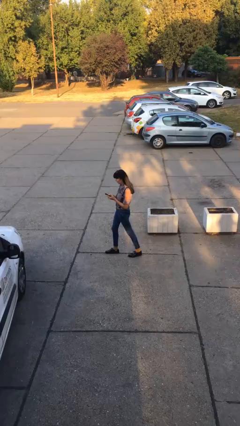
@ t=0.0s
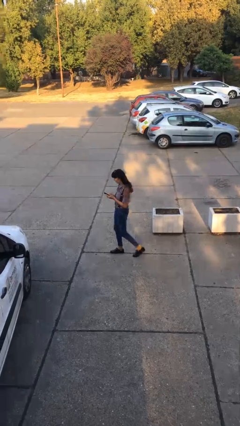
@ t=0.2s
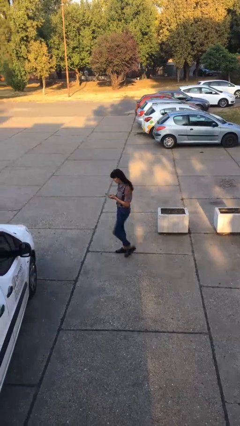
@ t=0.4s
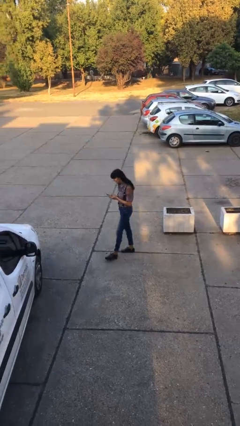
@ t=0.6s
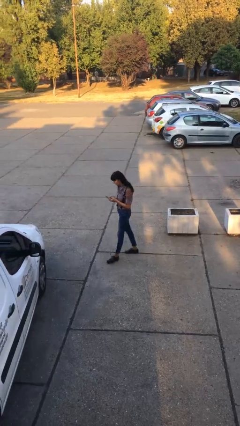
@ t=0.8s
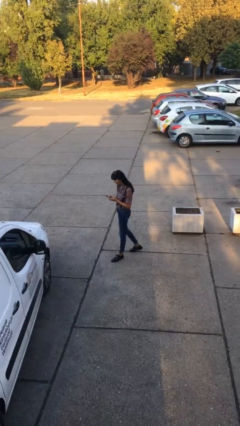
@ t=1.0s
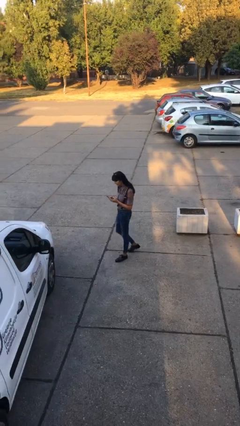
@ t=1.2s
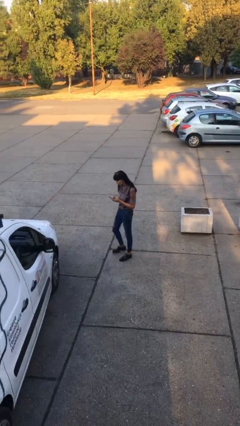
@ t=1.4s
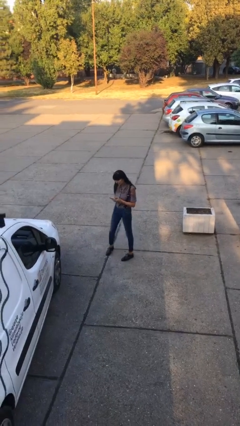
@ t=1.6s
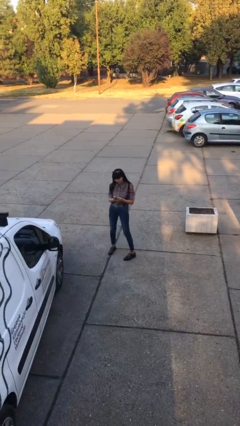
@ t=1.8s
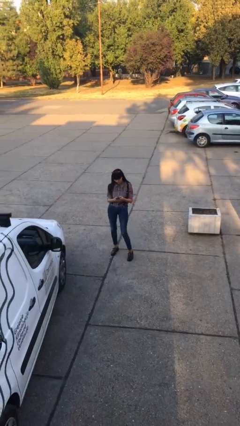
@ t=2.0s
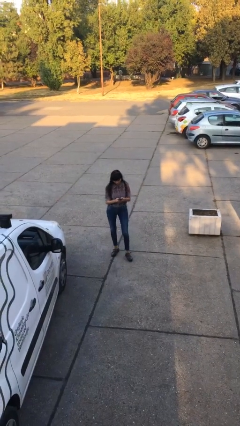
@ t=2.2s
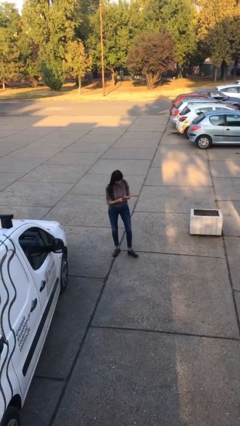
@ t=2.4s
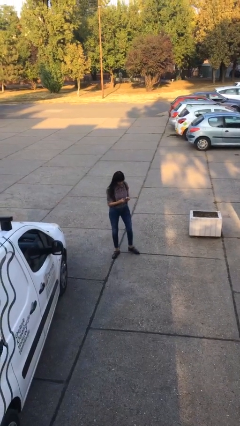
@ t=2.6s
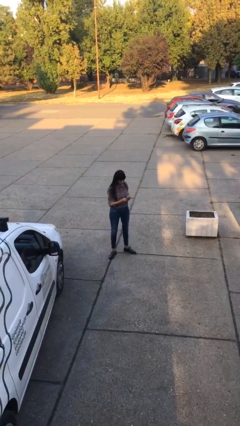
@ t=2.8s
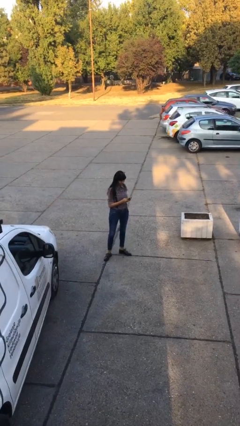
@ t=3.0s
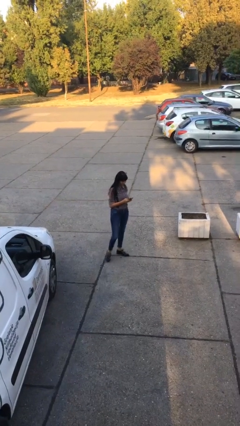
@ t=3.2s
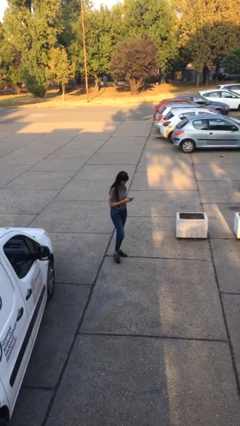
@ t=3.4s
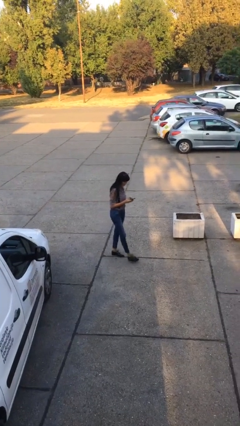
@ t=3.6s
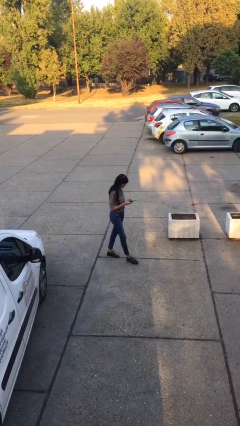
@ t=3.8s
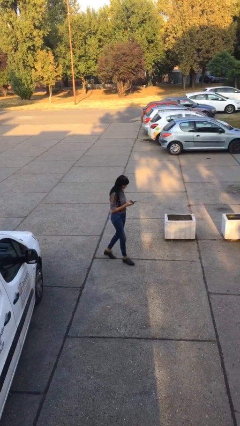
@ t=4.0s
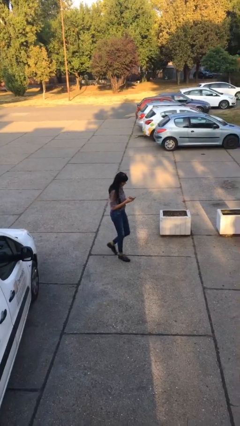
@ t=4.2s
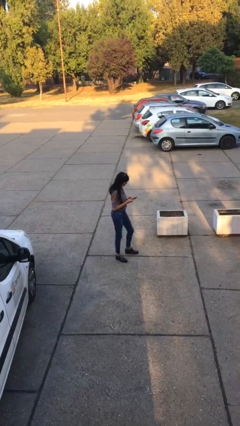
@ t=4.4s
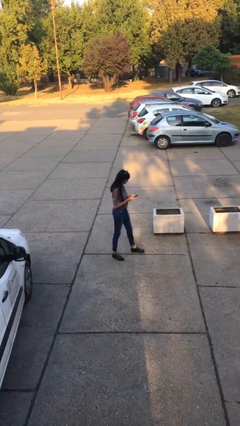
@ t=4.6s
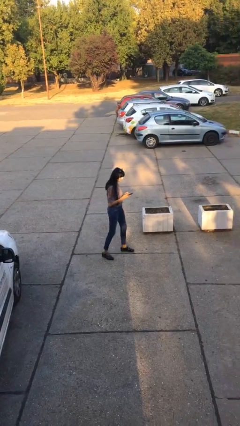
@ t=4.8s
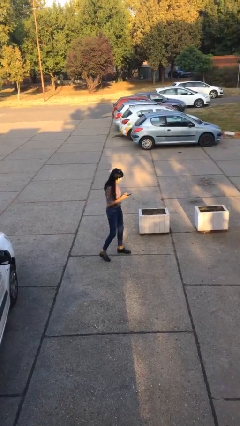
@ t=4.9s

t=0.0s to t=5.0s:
person texts on phone

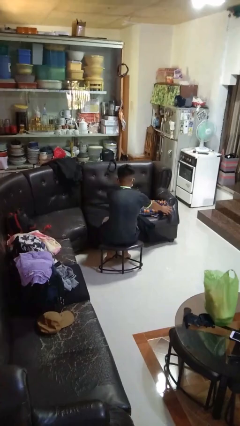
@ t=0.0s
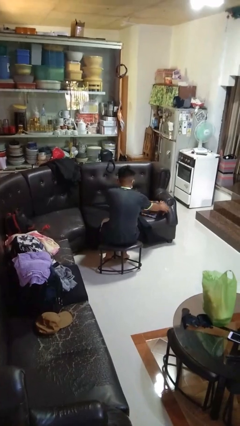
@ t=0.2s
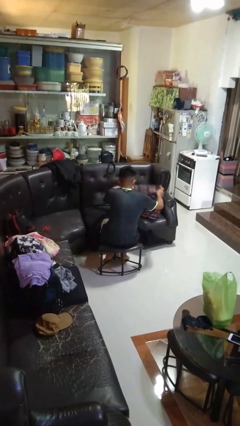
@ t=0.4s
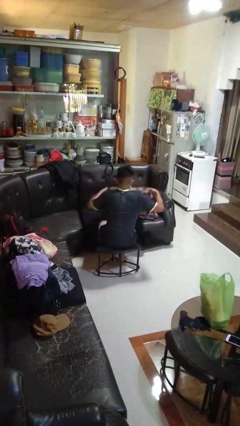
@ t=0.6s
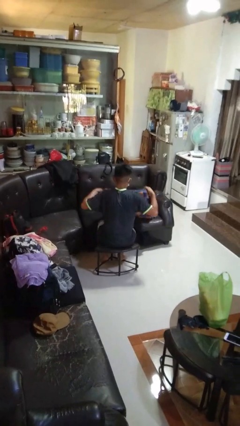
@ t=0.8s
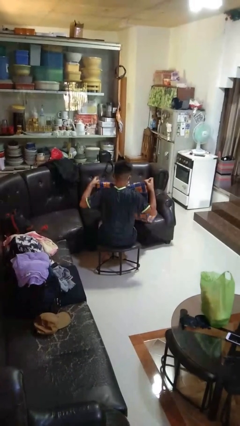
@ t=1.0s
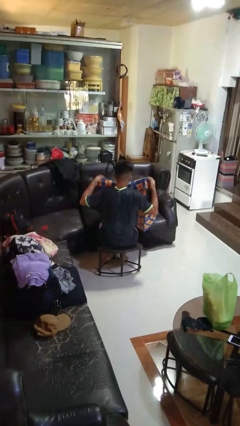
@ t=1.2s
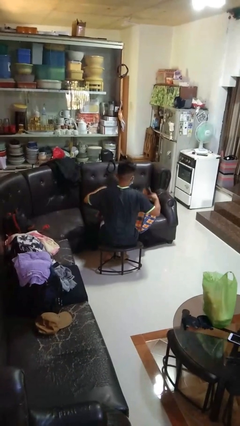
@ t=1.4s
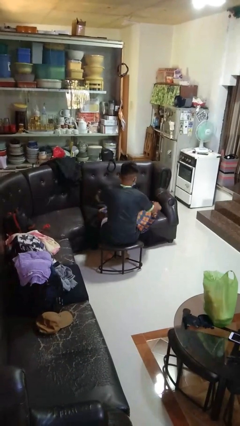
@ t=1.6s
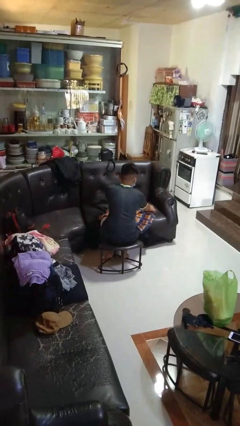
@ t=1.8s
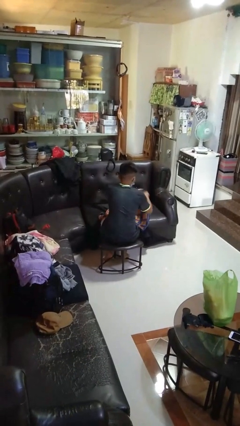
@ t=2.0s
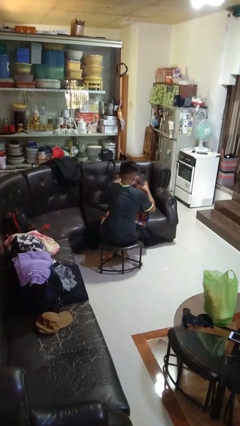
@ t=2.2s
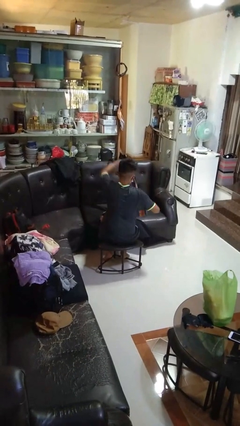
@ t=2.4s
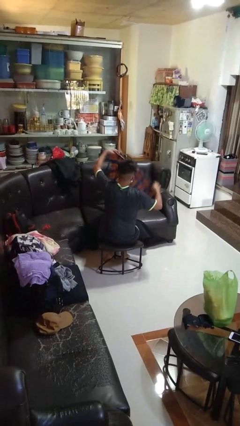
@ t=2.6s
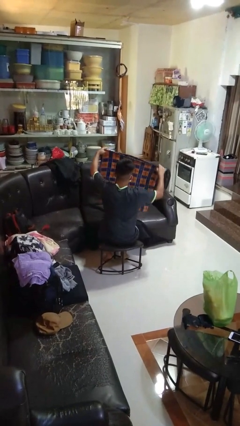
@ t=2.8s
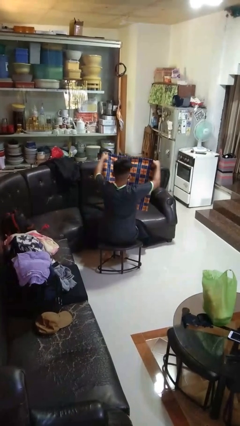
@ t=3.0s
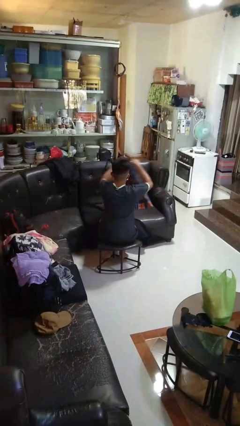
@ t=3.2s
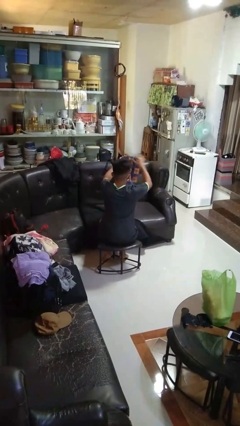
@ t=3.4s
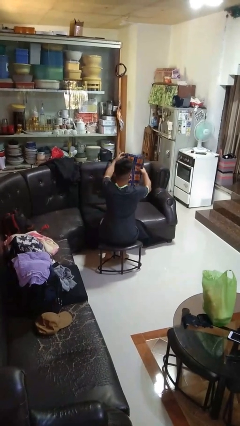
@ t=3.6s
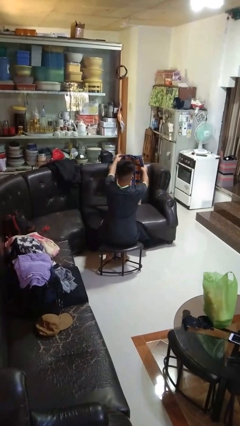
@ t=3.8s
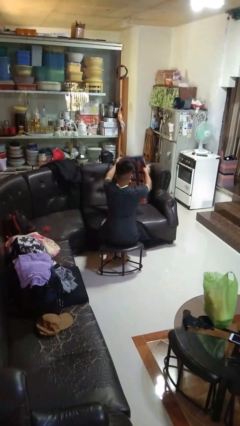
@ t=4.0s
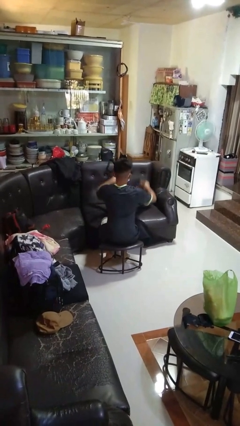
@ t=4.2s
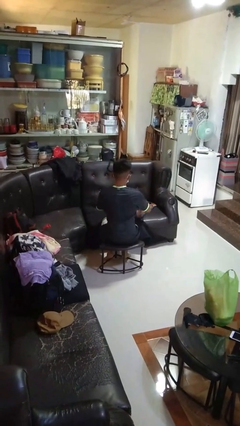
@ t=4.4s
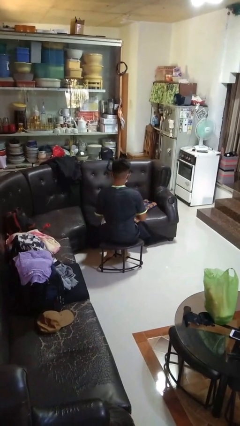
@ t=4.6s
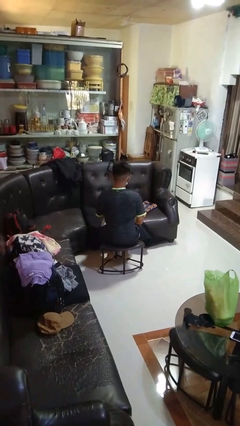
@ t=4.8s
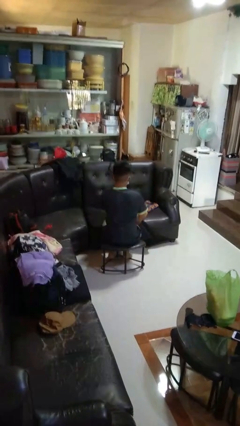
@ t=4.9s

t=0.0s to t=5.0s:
person folds blanket

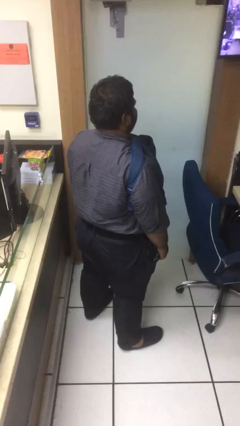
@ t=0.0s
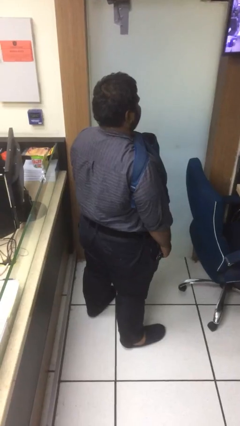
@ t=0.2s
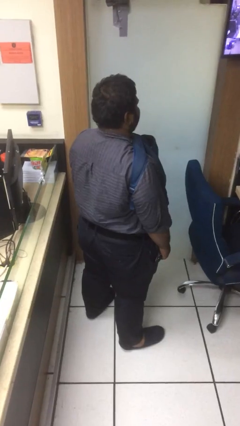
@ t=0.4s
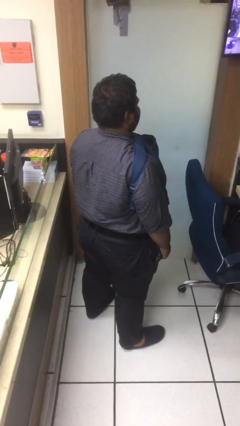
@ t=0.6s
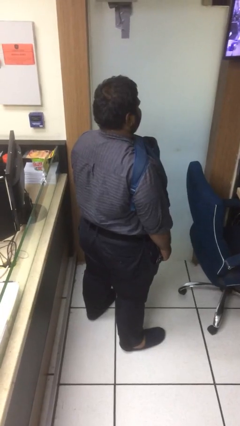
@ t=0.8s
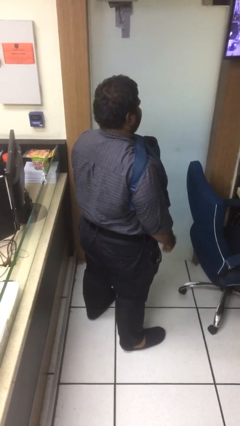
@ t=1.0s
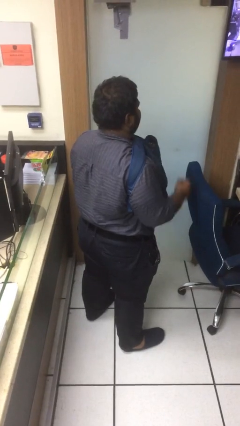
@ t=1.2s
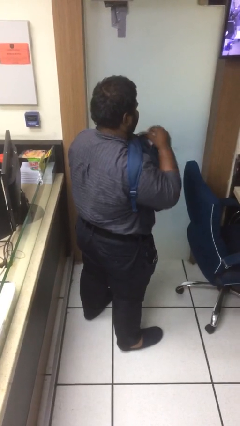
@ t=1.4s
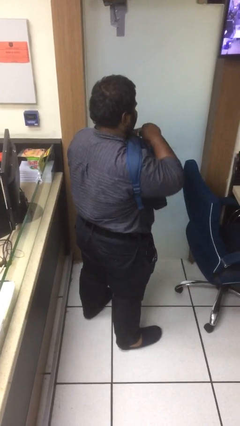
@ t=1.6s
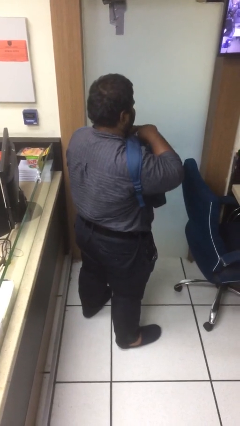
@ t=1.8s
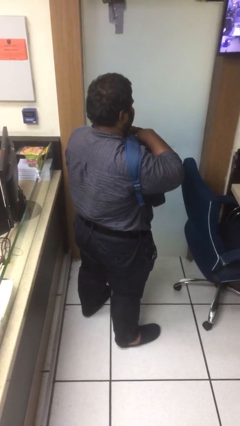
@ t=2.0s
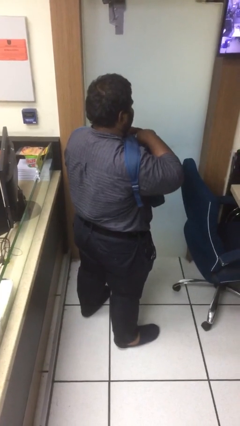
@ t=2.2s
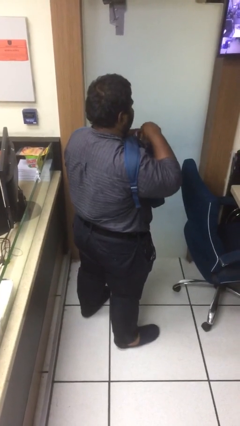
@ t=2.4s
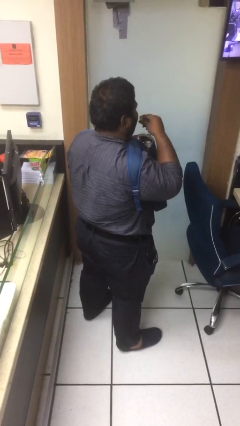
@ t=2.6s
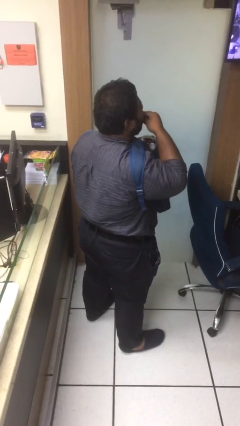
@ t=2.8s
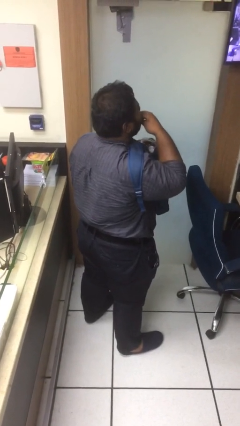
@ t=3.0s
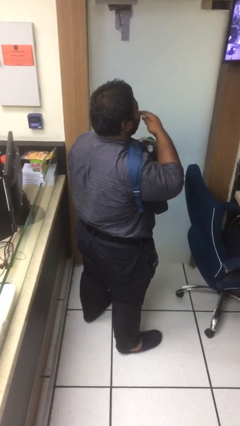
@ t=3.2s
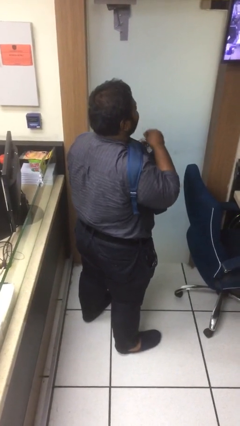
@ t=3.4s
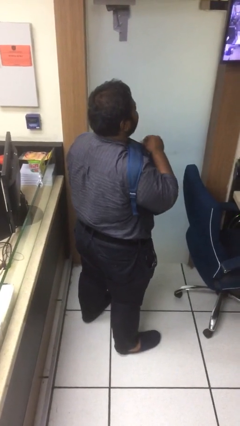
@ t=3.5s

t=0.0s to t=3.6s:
person eats snack from bag

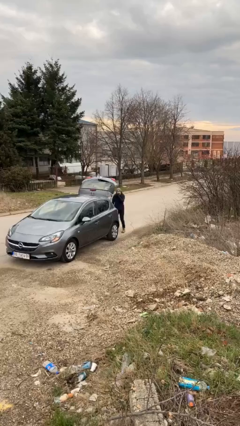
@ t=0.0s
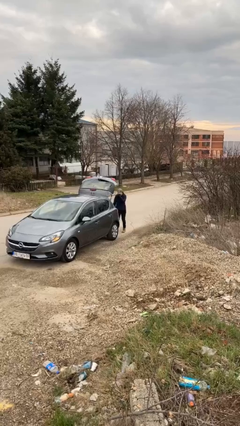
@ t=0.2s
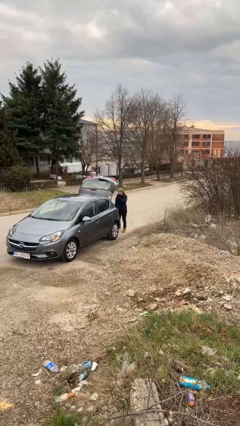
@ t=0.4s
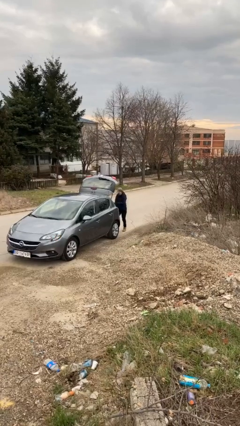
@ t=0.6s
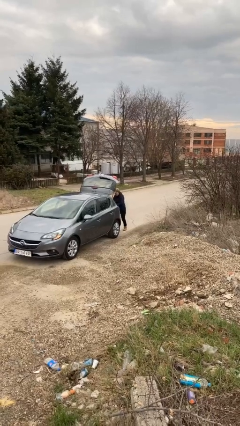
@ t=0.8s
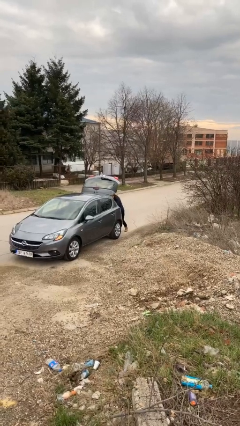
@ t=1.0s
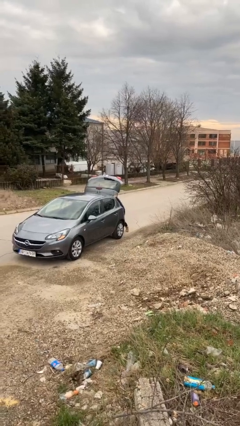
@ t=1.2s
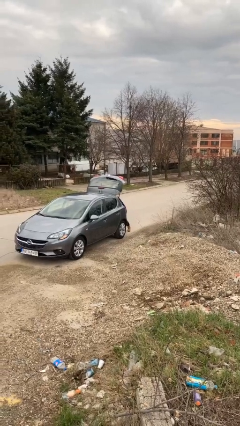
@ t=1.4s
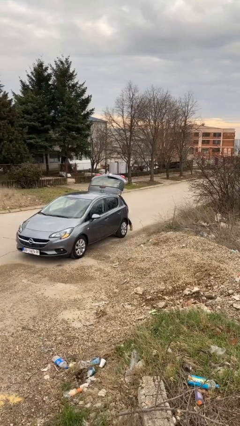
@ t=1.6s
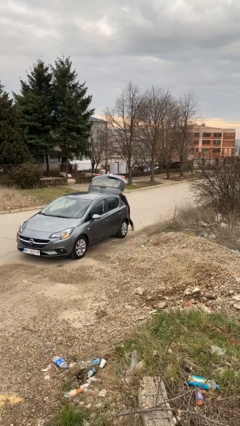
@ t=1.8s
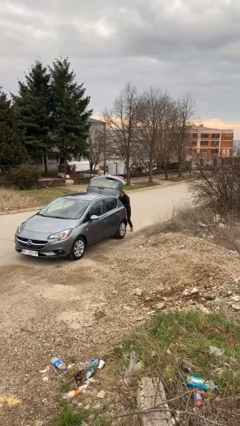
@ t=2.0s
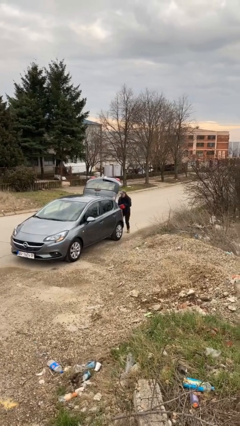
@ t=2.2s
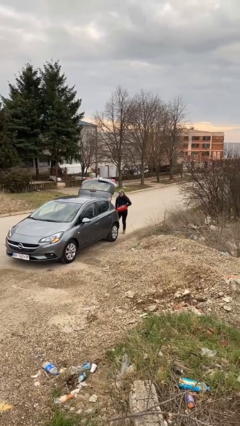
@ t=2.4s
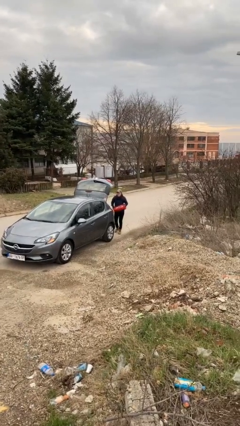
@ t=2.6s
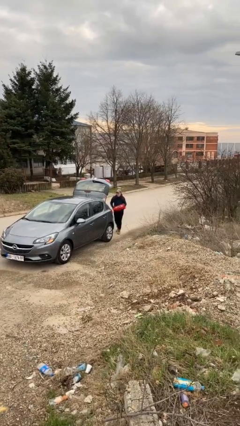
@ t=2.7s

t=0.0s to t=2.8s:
person unloads car

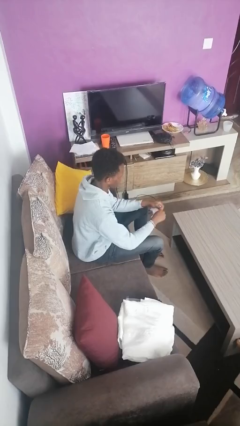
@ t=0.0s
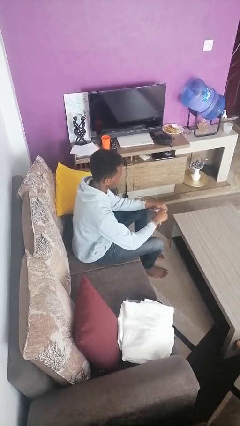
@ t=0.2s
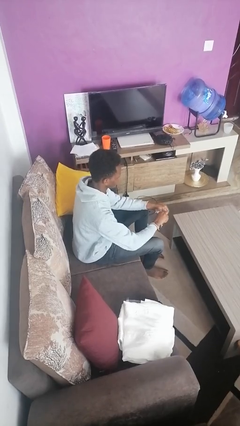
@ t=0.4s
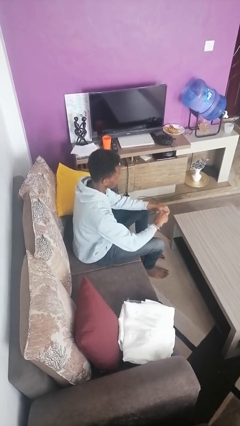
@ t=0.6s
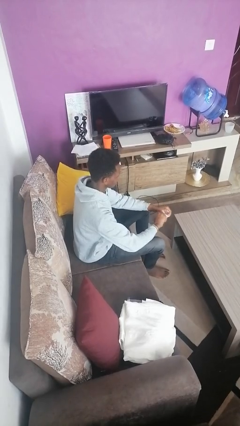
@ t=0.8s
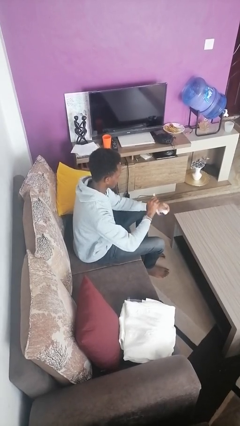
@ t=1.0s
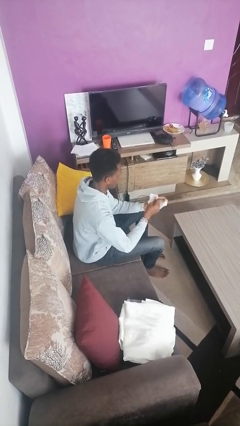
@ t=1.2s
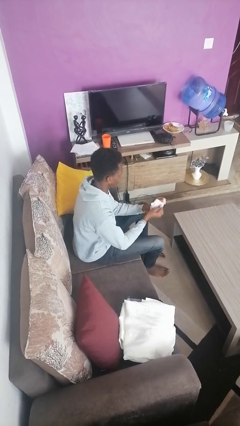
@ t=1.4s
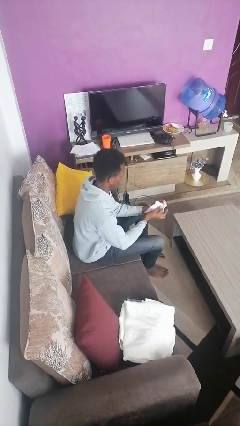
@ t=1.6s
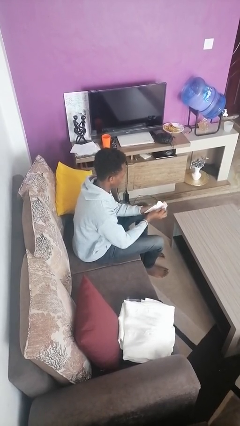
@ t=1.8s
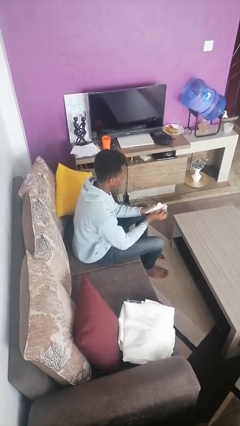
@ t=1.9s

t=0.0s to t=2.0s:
person tears paper
